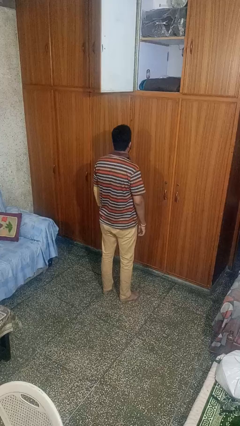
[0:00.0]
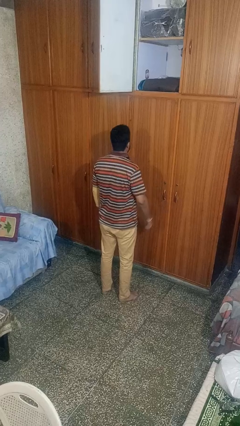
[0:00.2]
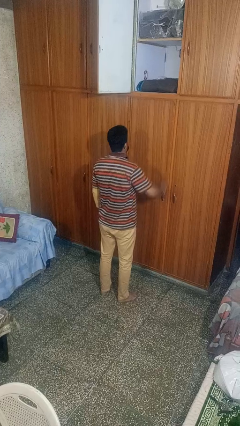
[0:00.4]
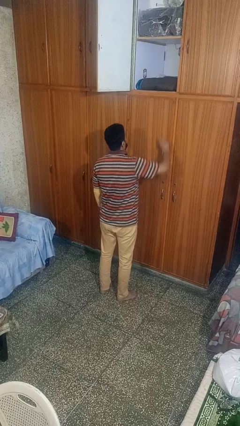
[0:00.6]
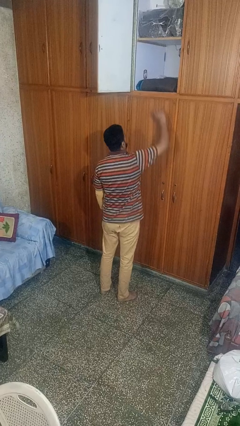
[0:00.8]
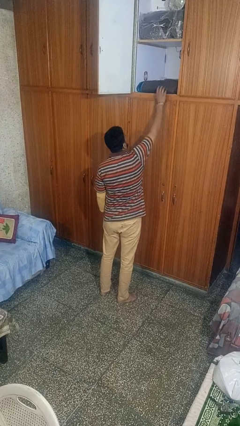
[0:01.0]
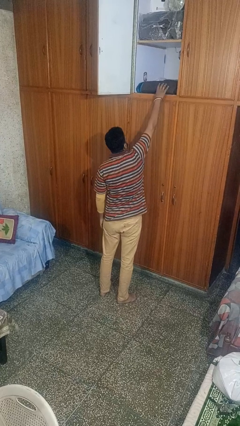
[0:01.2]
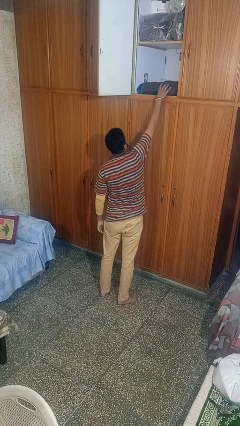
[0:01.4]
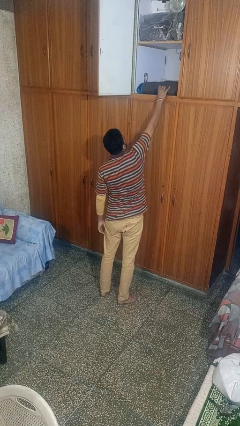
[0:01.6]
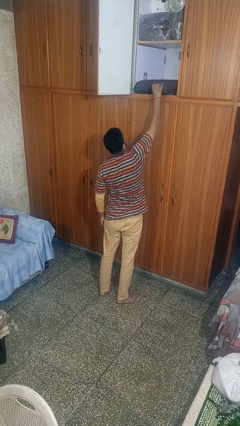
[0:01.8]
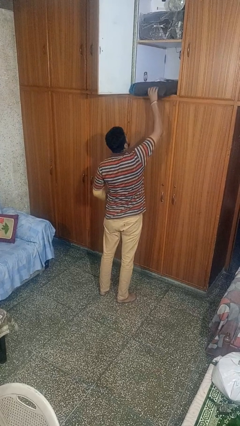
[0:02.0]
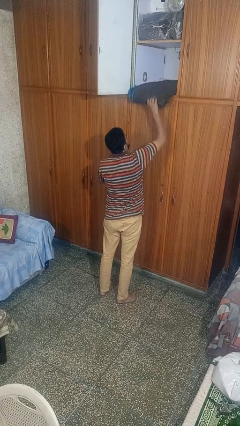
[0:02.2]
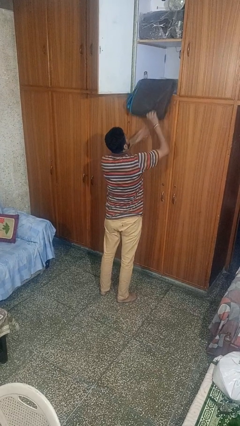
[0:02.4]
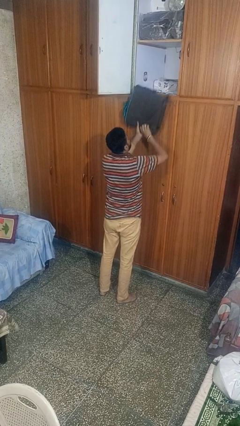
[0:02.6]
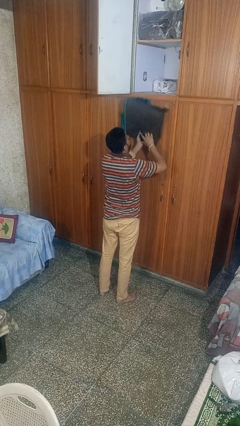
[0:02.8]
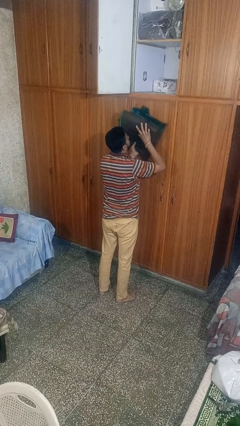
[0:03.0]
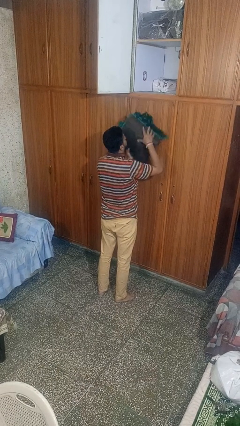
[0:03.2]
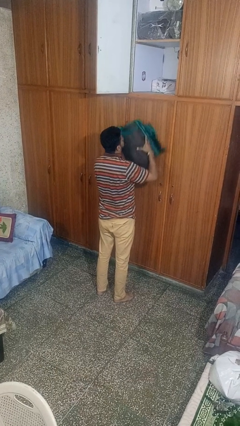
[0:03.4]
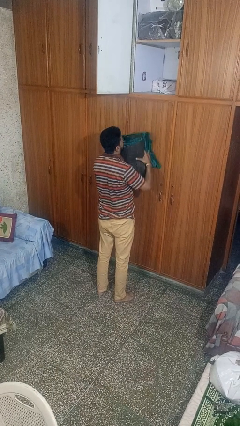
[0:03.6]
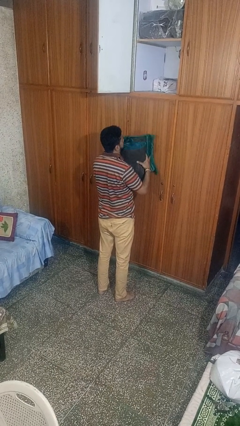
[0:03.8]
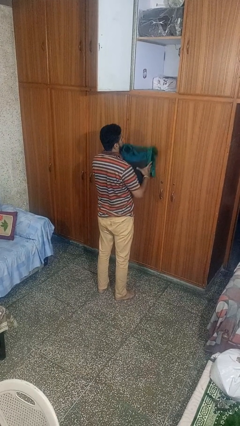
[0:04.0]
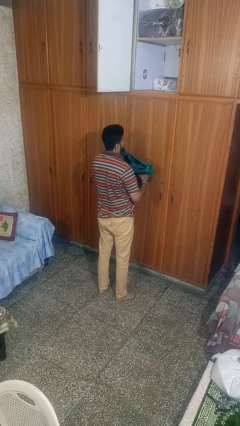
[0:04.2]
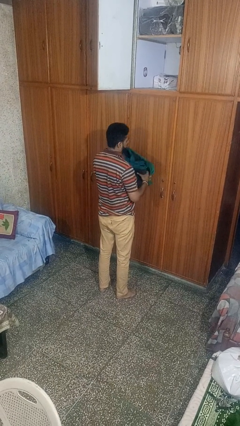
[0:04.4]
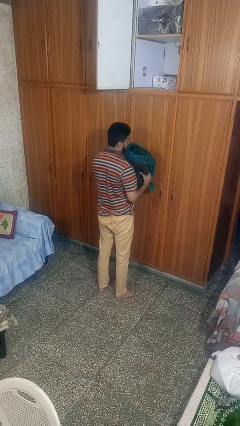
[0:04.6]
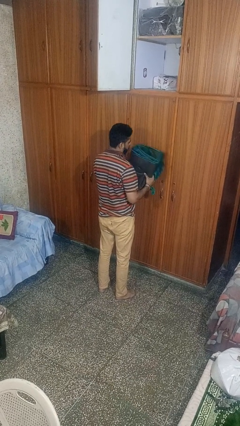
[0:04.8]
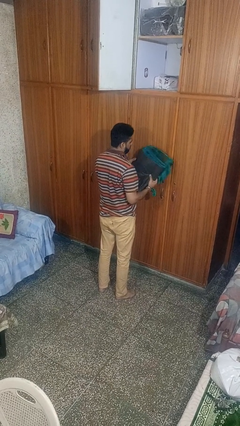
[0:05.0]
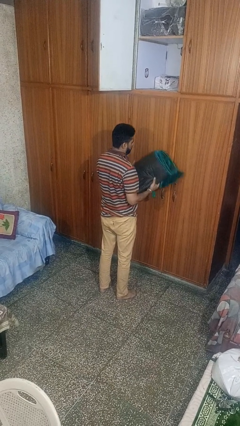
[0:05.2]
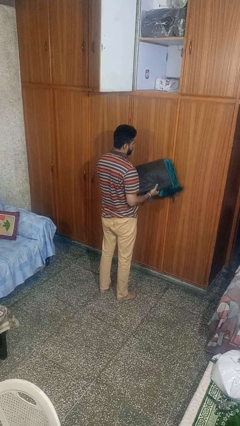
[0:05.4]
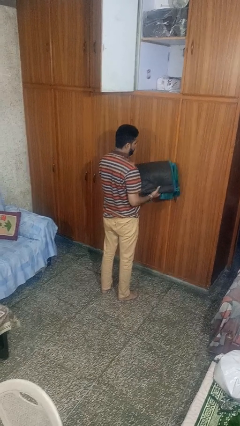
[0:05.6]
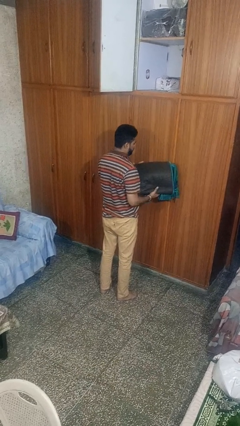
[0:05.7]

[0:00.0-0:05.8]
person picks up object from shelf

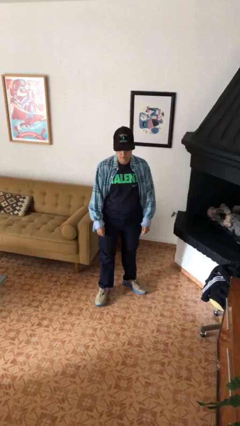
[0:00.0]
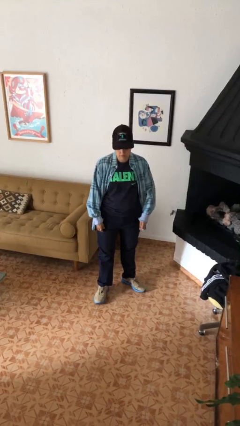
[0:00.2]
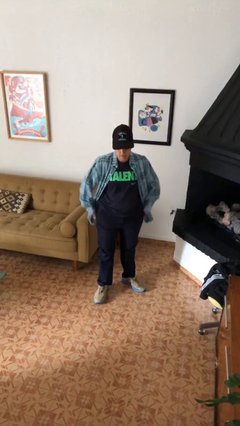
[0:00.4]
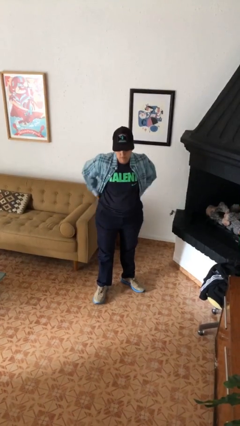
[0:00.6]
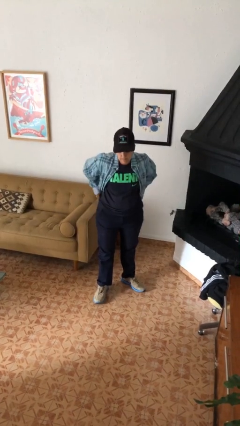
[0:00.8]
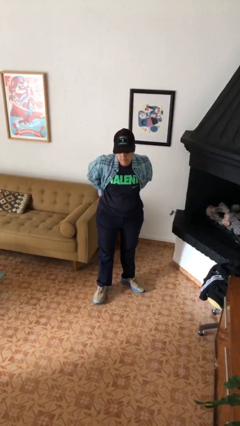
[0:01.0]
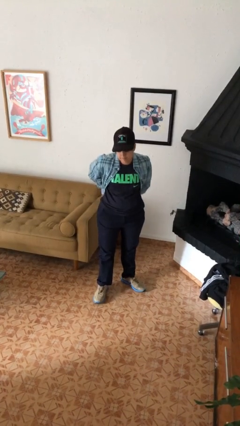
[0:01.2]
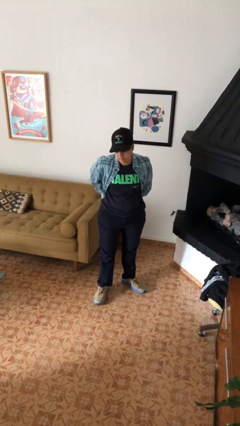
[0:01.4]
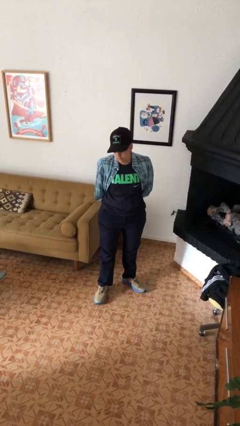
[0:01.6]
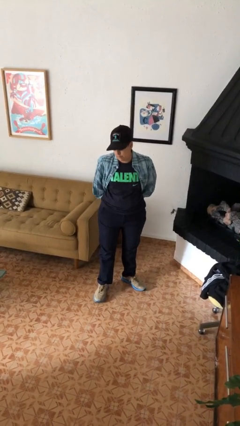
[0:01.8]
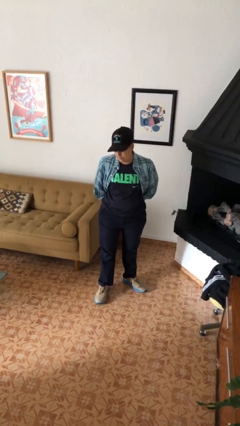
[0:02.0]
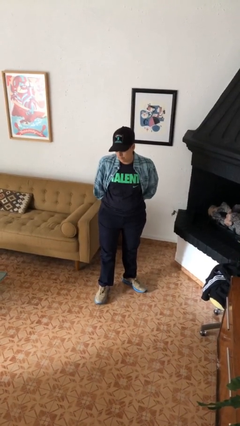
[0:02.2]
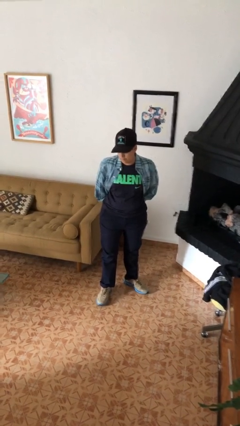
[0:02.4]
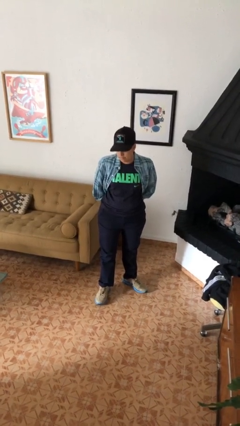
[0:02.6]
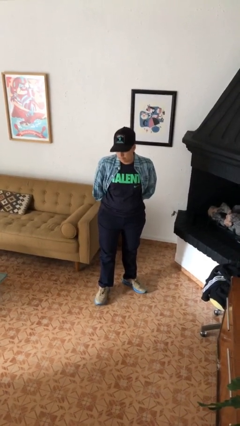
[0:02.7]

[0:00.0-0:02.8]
person puts hands in back pockets

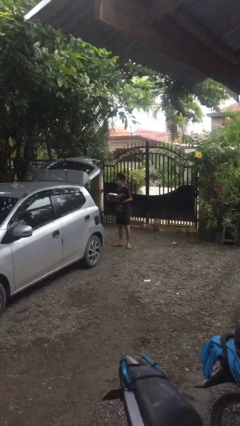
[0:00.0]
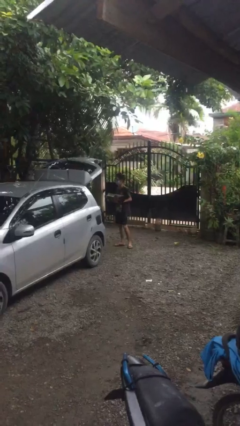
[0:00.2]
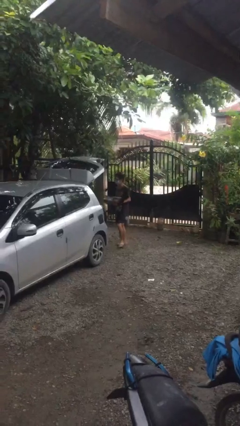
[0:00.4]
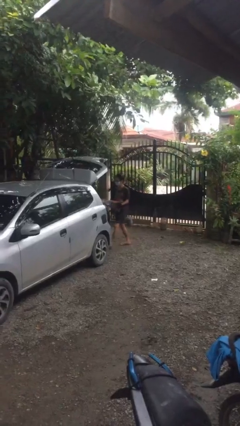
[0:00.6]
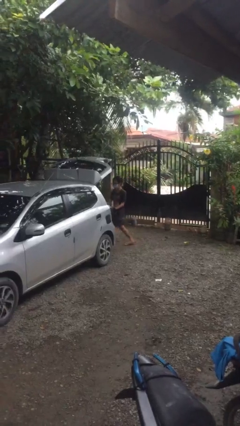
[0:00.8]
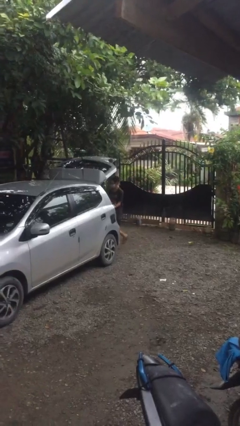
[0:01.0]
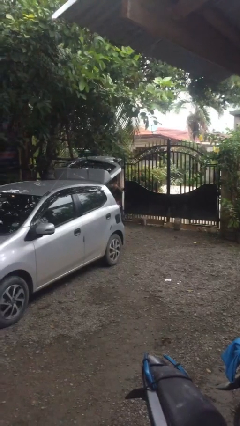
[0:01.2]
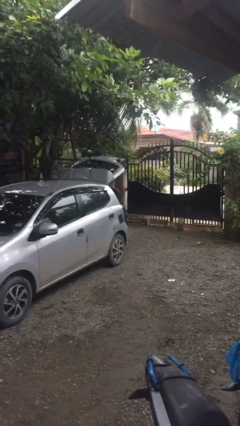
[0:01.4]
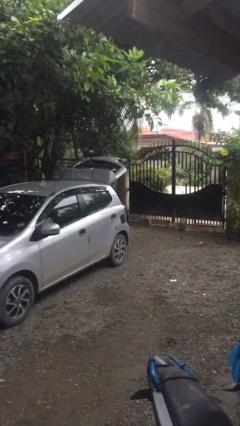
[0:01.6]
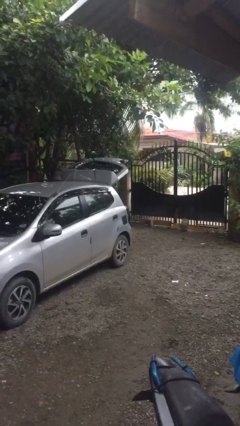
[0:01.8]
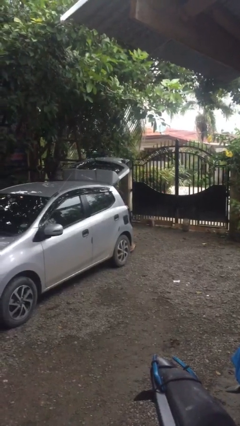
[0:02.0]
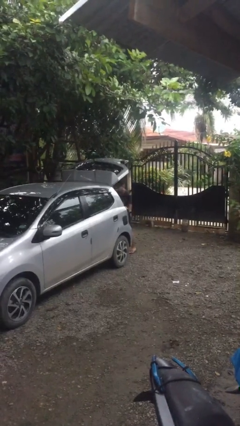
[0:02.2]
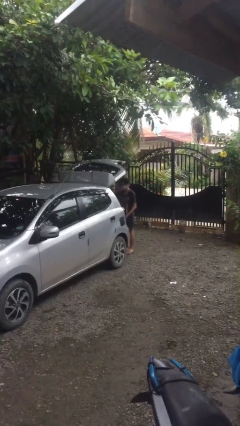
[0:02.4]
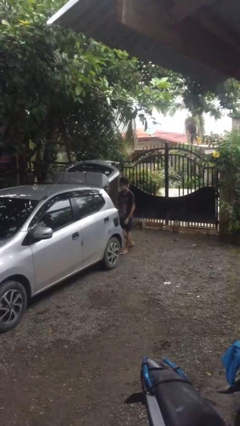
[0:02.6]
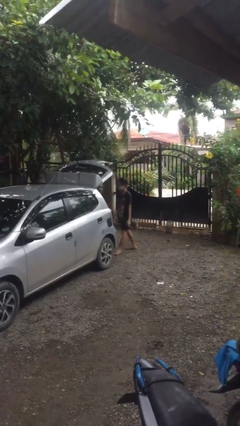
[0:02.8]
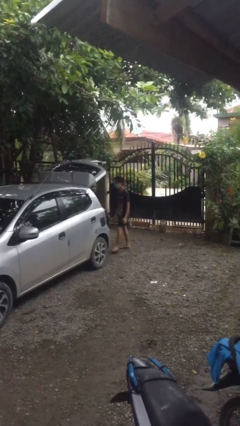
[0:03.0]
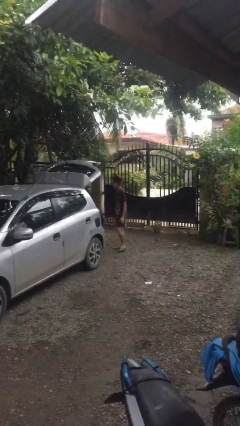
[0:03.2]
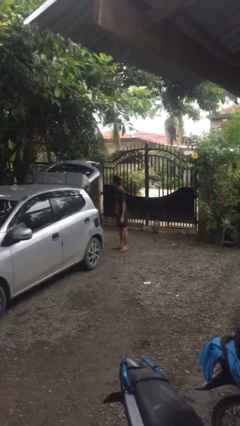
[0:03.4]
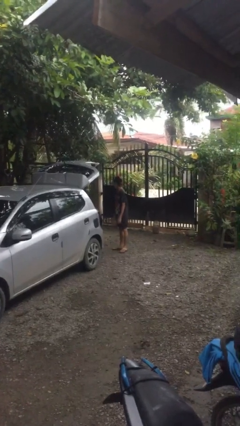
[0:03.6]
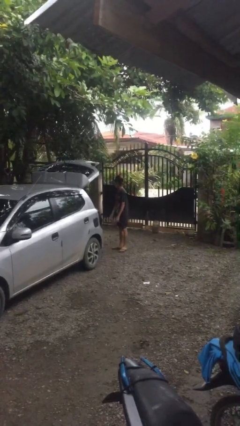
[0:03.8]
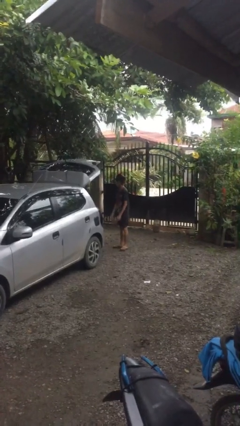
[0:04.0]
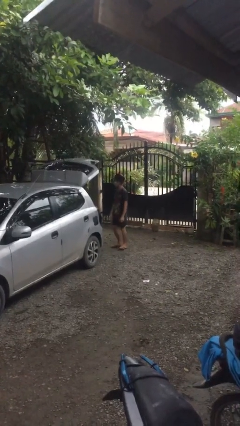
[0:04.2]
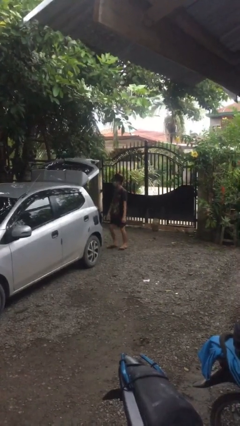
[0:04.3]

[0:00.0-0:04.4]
person loads car

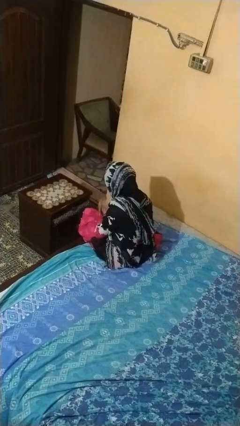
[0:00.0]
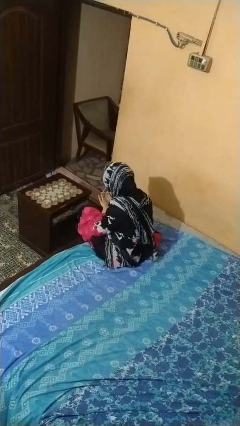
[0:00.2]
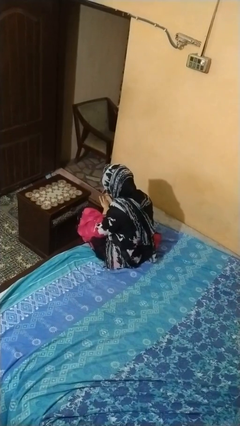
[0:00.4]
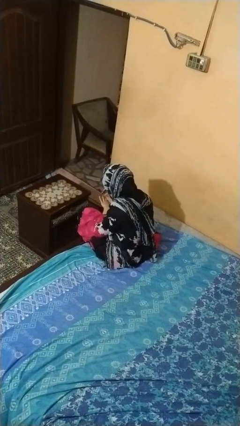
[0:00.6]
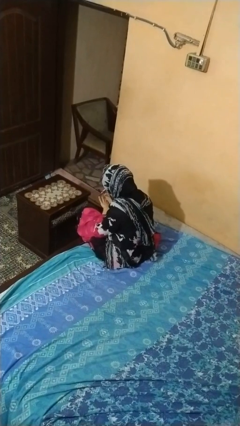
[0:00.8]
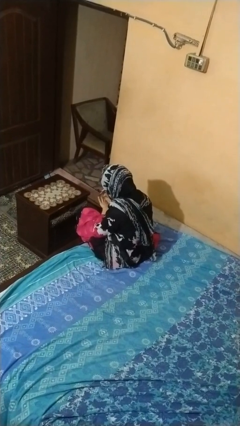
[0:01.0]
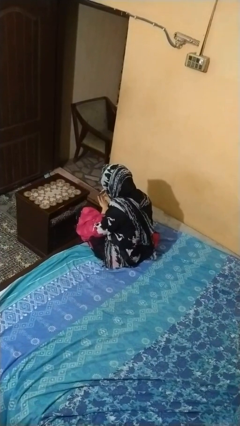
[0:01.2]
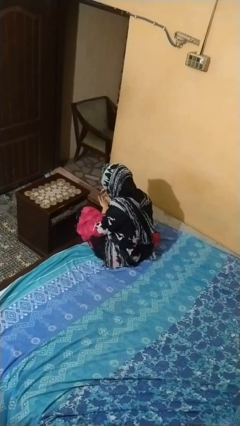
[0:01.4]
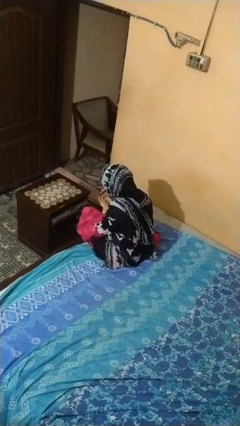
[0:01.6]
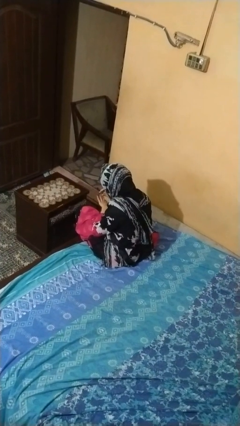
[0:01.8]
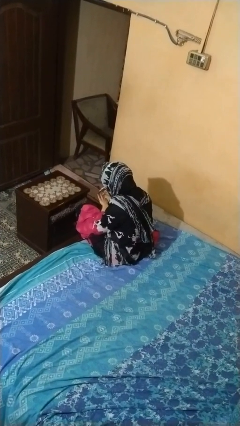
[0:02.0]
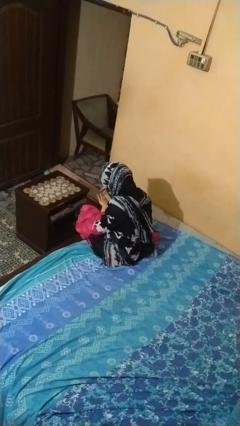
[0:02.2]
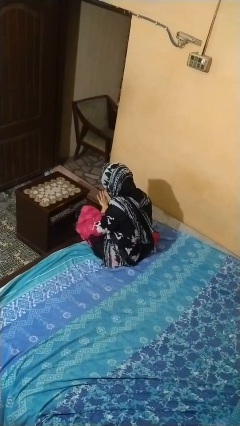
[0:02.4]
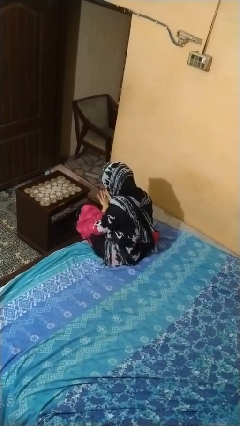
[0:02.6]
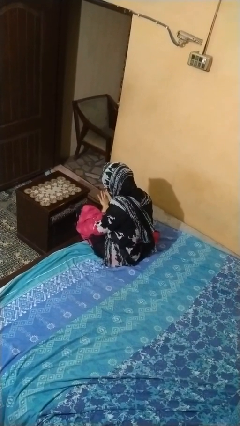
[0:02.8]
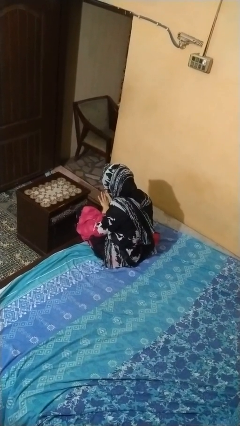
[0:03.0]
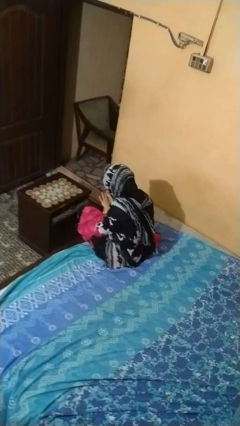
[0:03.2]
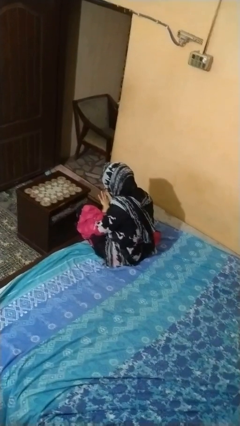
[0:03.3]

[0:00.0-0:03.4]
person clips fingernails

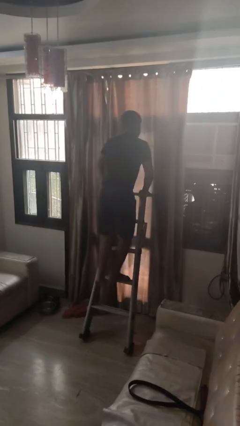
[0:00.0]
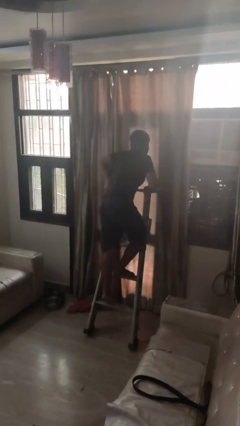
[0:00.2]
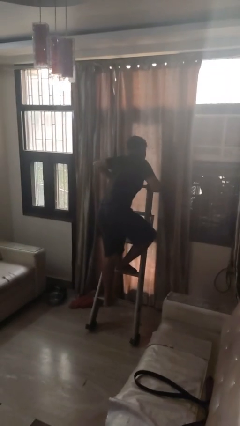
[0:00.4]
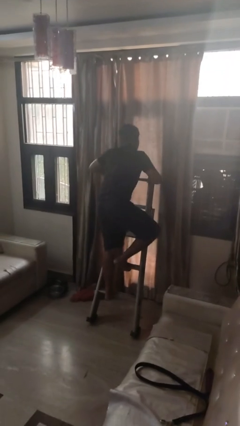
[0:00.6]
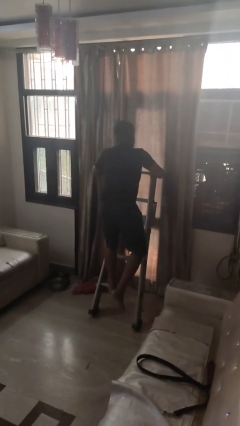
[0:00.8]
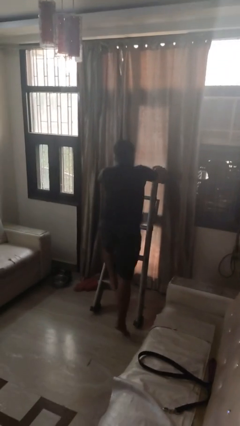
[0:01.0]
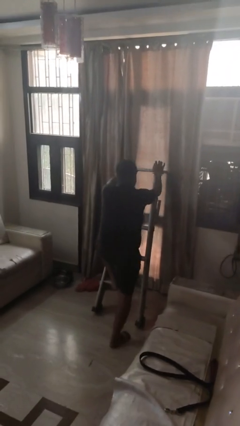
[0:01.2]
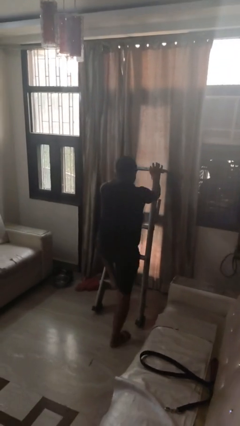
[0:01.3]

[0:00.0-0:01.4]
person climbs down ladder
